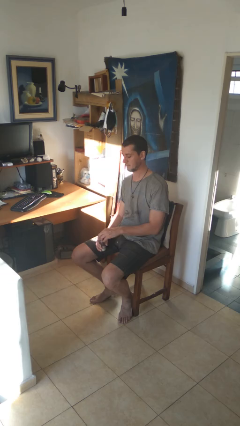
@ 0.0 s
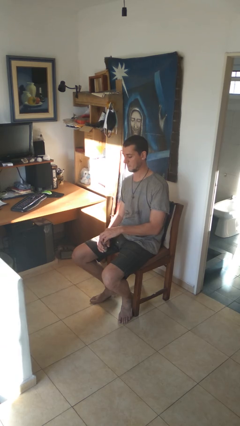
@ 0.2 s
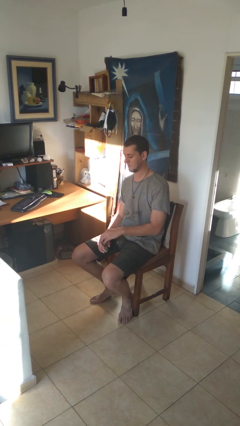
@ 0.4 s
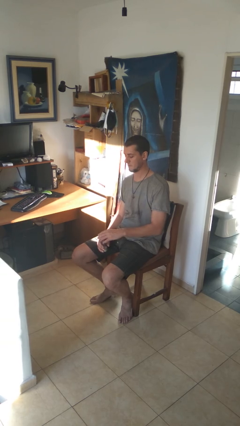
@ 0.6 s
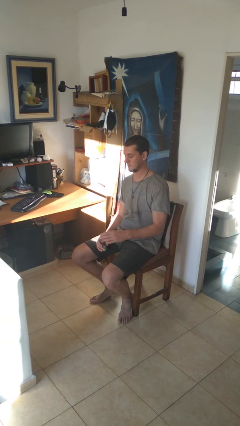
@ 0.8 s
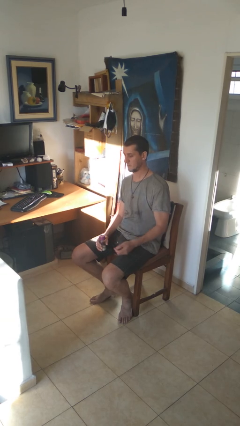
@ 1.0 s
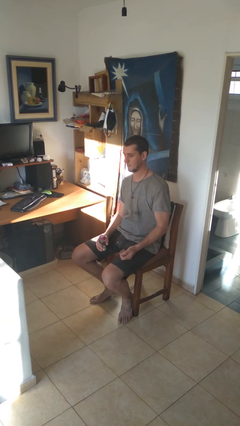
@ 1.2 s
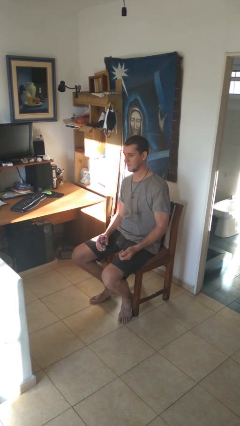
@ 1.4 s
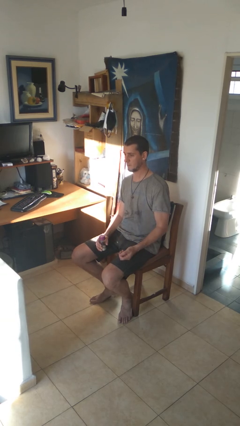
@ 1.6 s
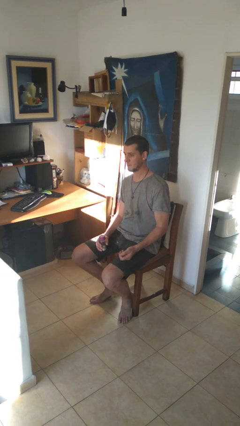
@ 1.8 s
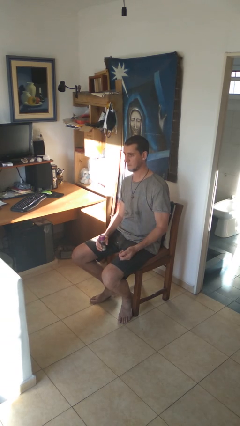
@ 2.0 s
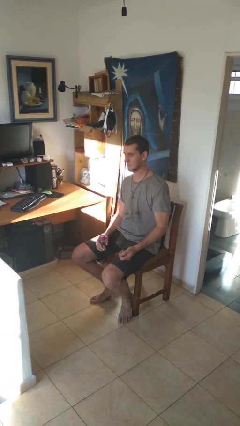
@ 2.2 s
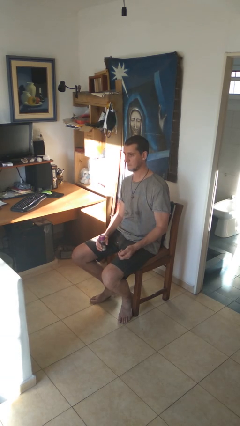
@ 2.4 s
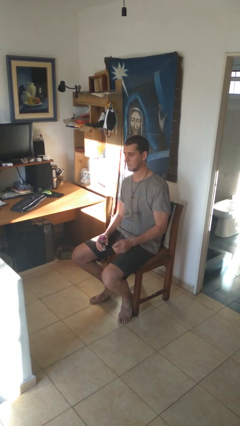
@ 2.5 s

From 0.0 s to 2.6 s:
person closes jar

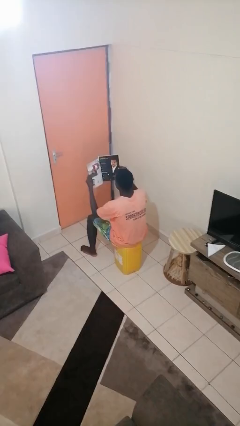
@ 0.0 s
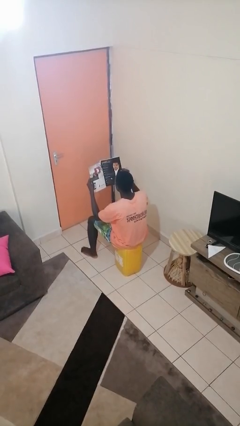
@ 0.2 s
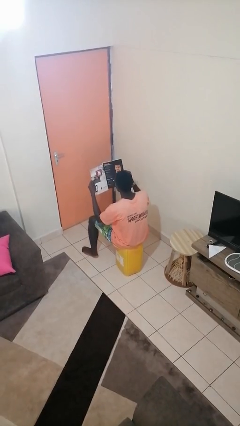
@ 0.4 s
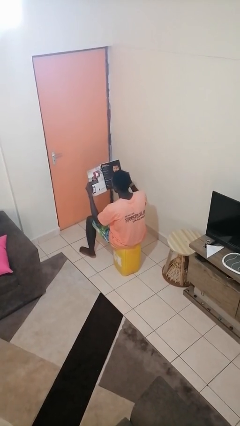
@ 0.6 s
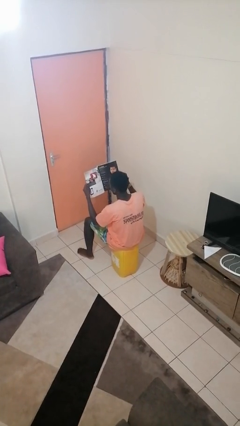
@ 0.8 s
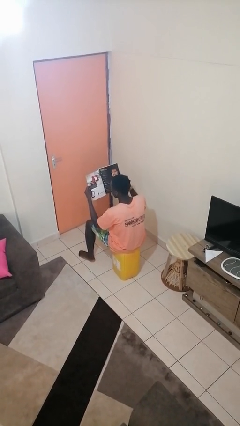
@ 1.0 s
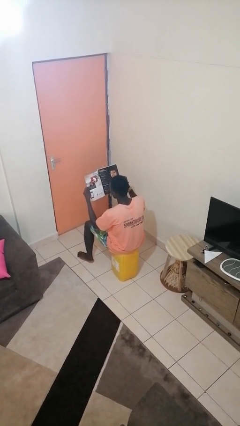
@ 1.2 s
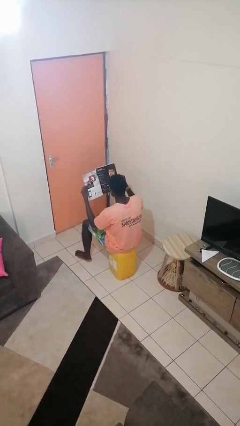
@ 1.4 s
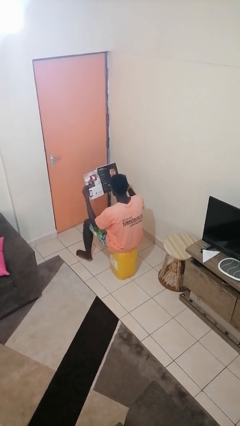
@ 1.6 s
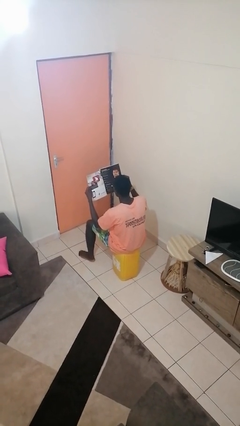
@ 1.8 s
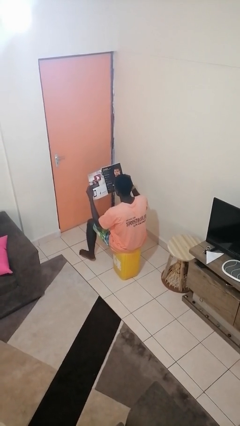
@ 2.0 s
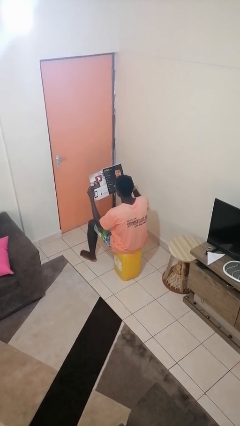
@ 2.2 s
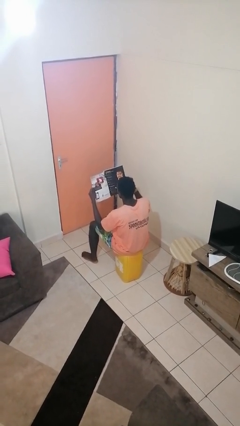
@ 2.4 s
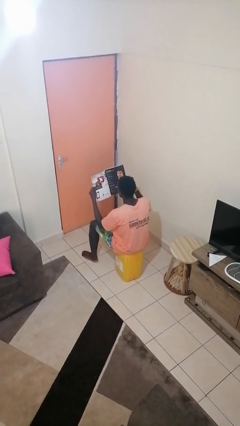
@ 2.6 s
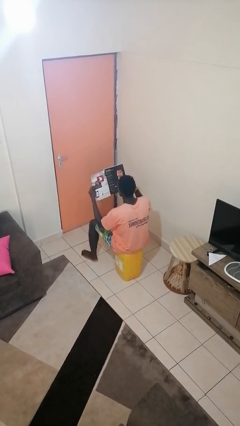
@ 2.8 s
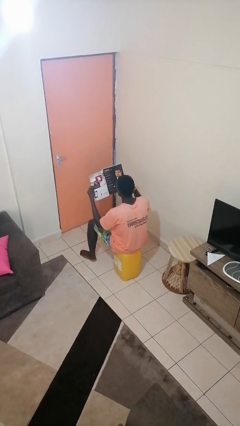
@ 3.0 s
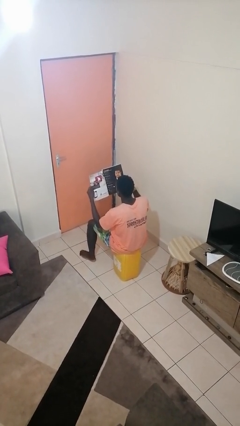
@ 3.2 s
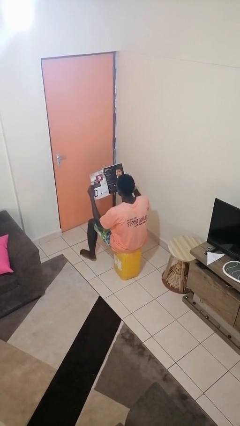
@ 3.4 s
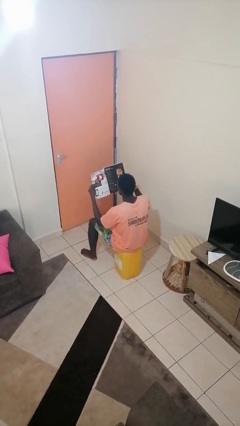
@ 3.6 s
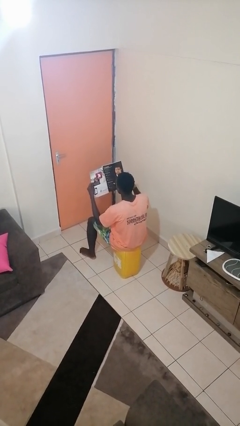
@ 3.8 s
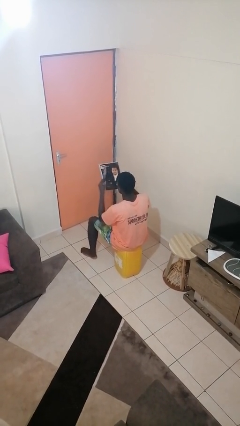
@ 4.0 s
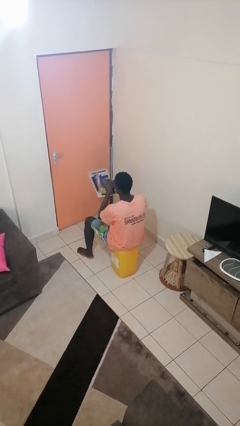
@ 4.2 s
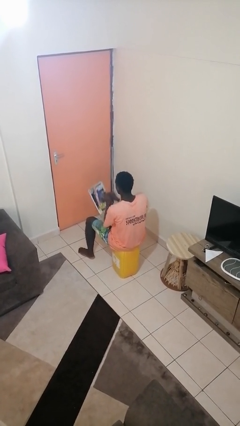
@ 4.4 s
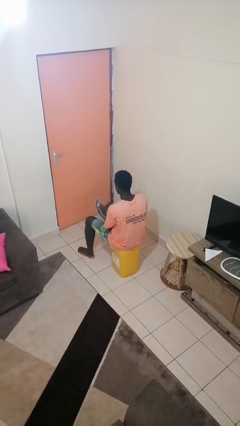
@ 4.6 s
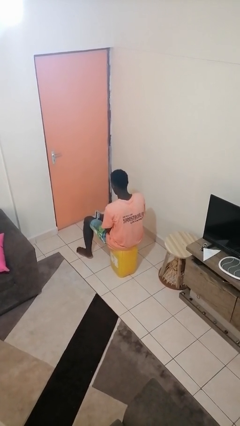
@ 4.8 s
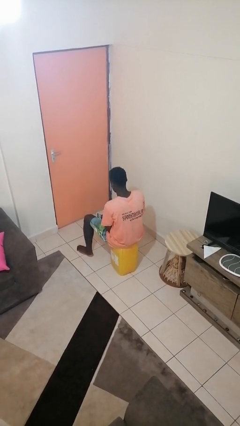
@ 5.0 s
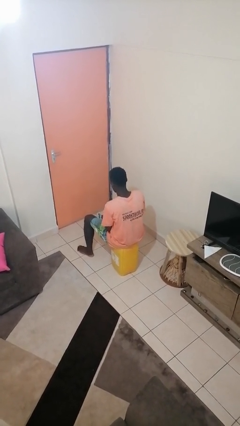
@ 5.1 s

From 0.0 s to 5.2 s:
person reads magazine

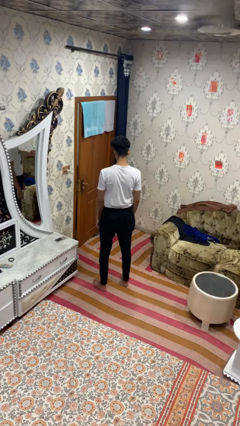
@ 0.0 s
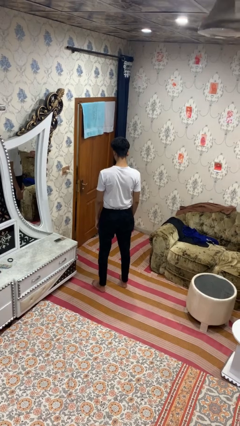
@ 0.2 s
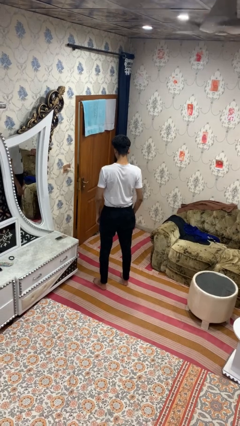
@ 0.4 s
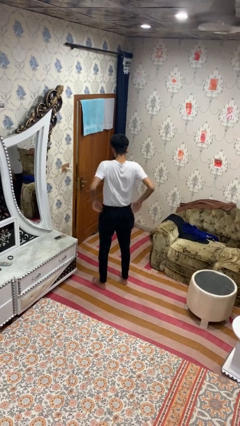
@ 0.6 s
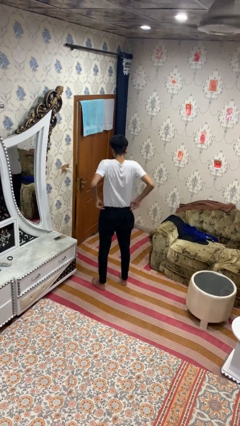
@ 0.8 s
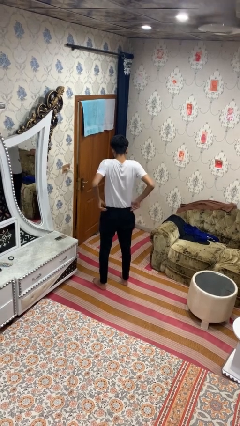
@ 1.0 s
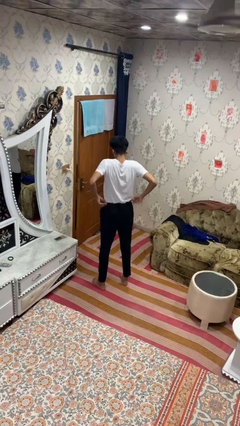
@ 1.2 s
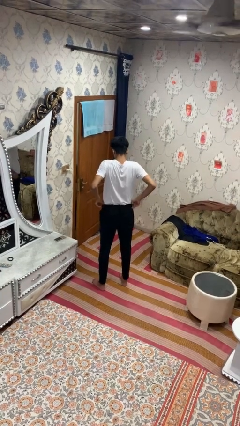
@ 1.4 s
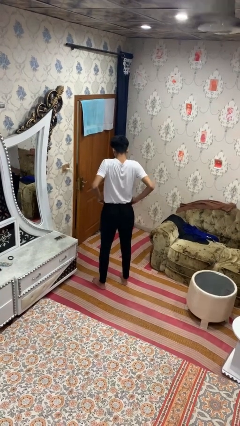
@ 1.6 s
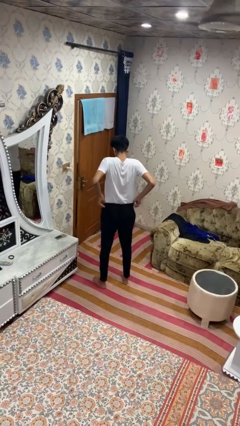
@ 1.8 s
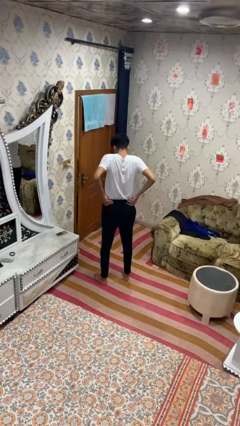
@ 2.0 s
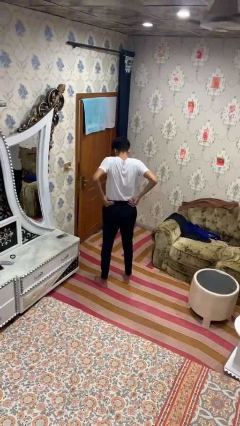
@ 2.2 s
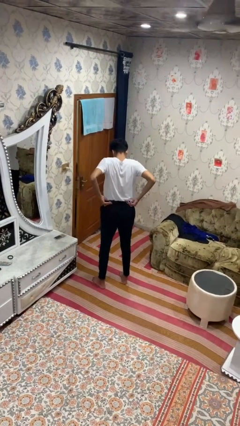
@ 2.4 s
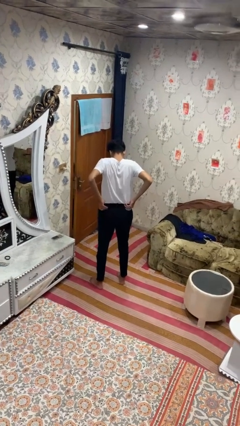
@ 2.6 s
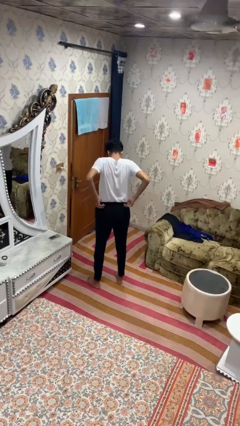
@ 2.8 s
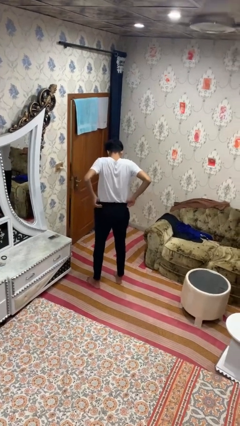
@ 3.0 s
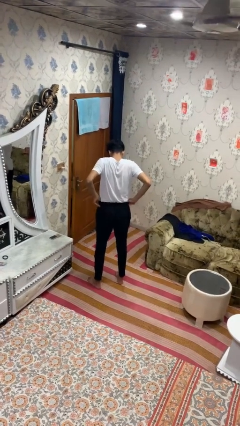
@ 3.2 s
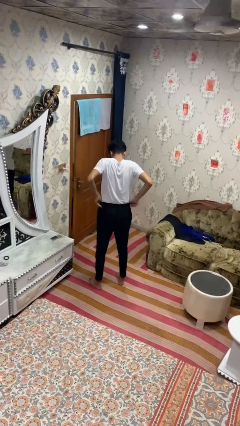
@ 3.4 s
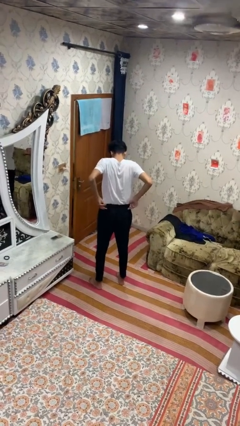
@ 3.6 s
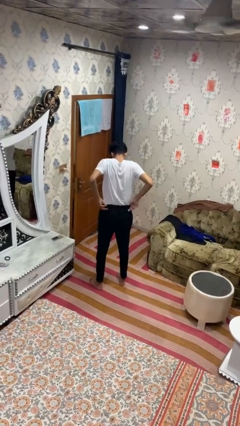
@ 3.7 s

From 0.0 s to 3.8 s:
person hikes up pants

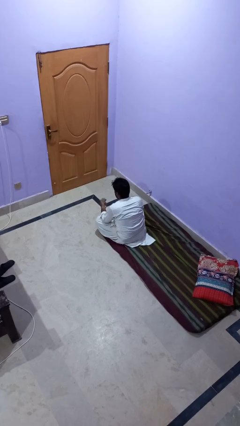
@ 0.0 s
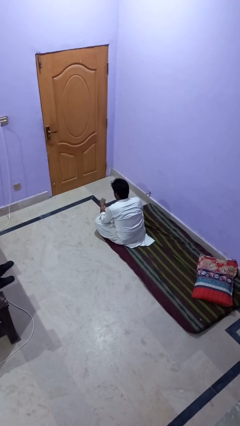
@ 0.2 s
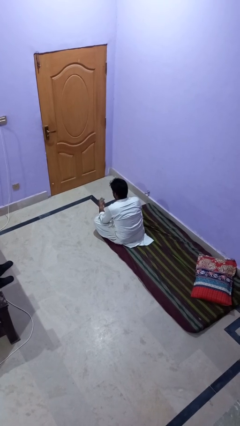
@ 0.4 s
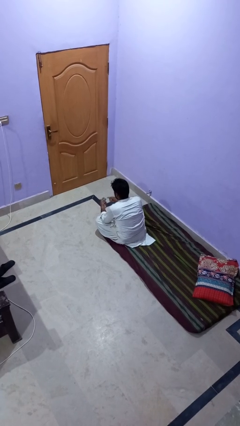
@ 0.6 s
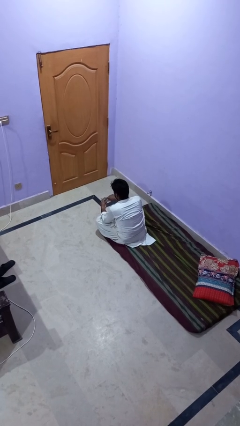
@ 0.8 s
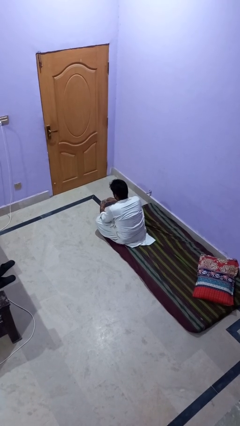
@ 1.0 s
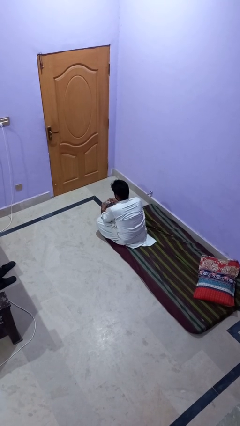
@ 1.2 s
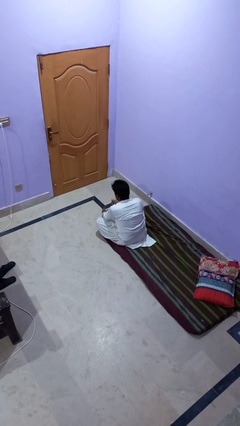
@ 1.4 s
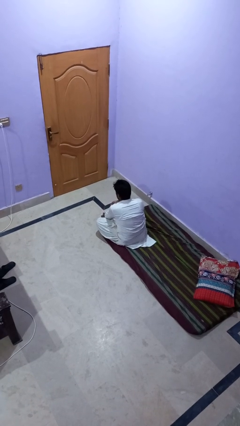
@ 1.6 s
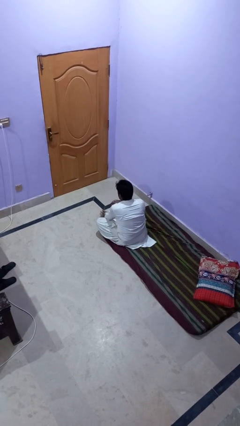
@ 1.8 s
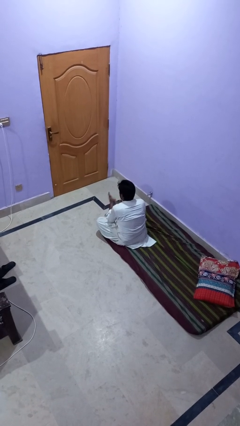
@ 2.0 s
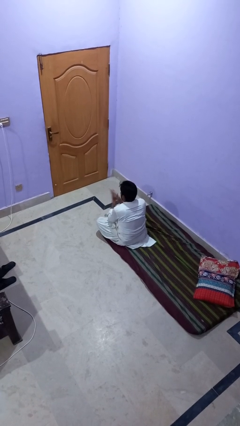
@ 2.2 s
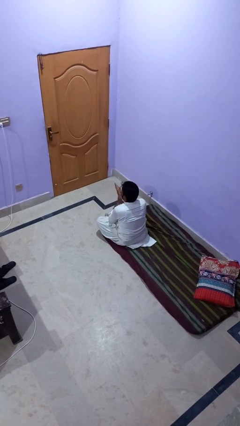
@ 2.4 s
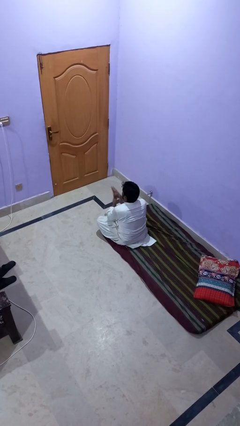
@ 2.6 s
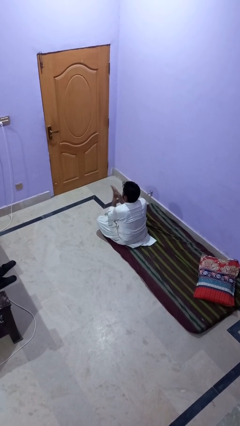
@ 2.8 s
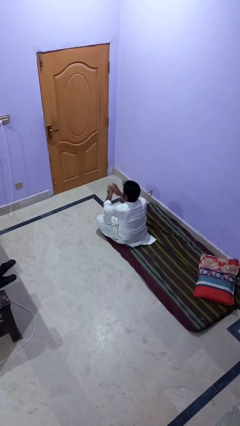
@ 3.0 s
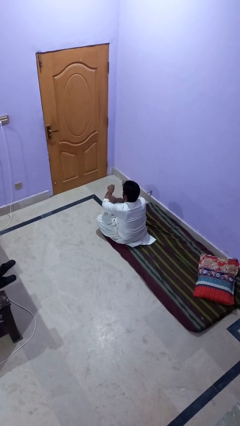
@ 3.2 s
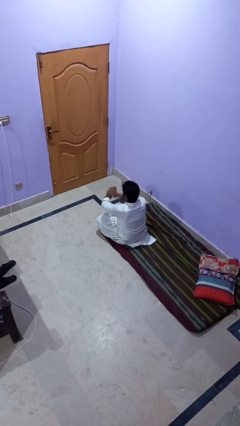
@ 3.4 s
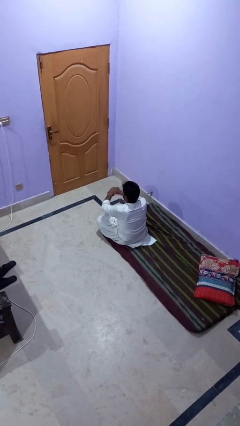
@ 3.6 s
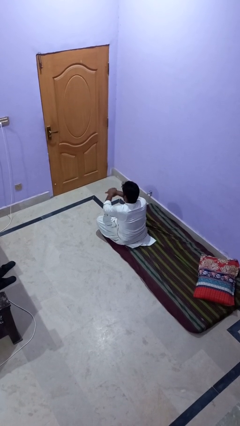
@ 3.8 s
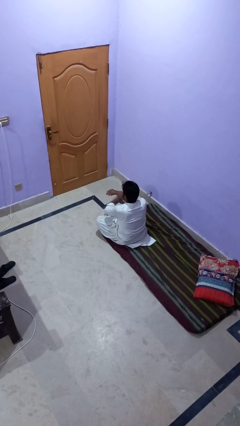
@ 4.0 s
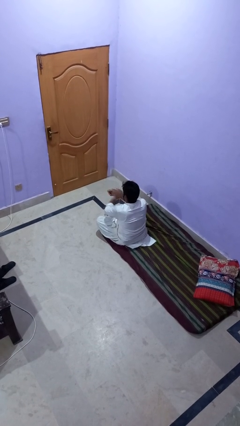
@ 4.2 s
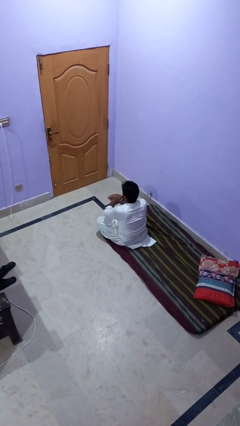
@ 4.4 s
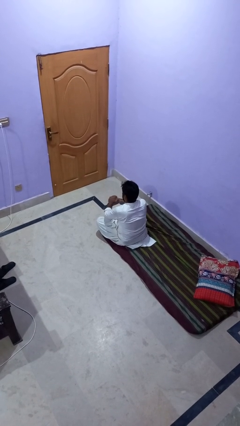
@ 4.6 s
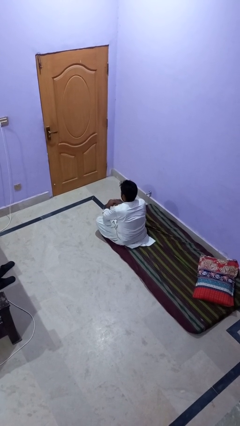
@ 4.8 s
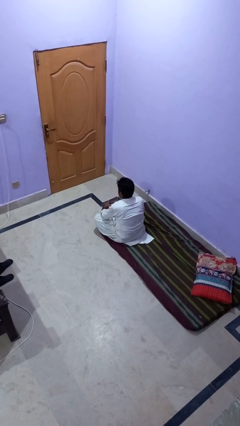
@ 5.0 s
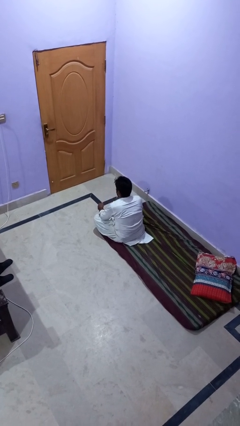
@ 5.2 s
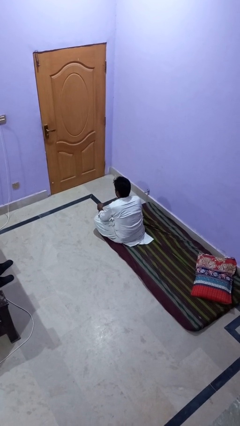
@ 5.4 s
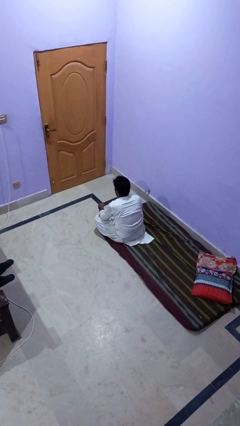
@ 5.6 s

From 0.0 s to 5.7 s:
person applies sunscreen

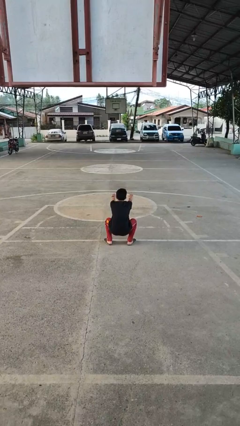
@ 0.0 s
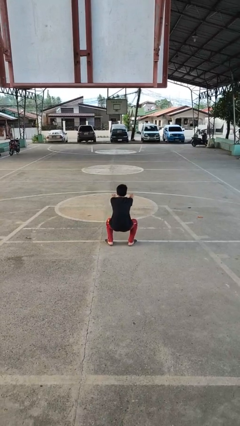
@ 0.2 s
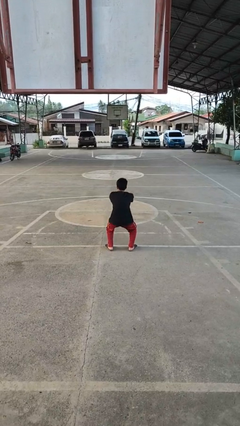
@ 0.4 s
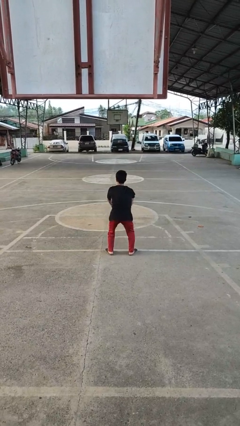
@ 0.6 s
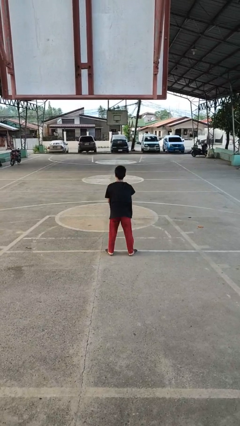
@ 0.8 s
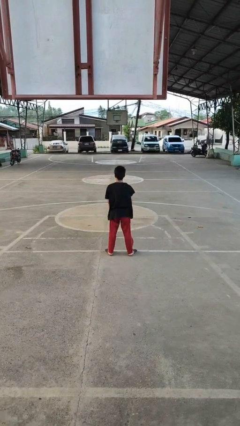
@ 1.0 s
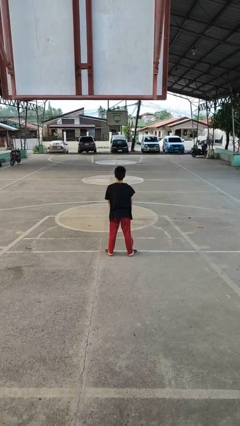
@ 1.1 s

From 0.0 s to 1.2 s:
person stands up
